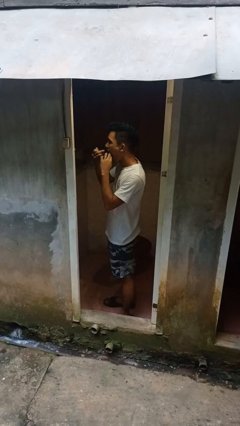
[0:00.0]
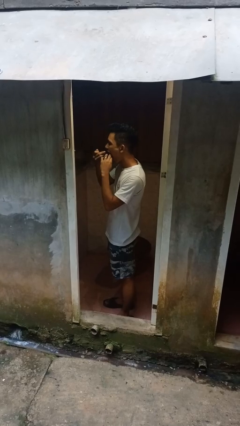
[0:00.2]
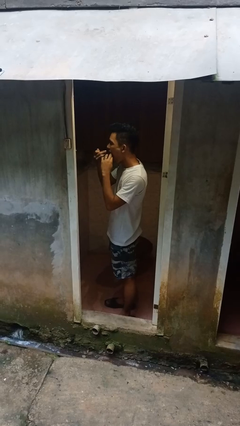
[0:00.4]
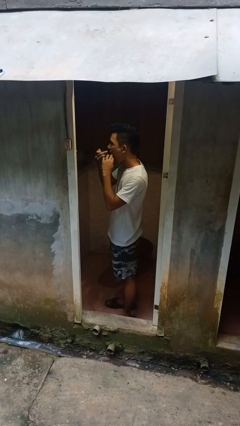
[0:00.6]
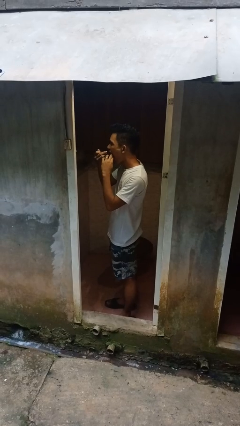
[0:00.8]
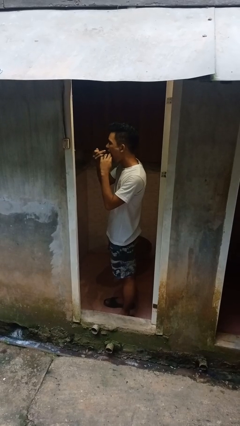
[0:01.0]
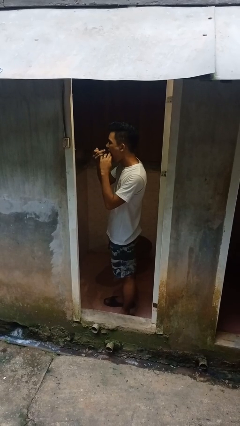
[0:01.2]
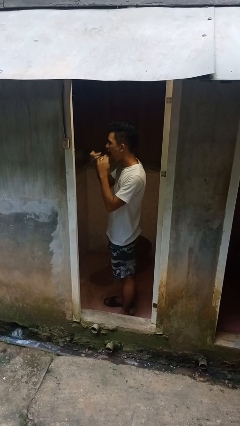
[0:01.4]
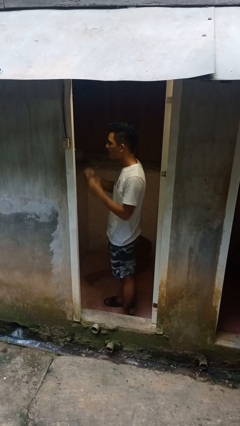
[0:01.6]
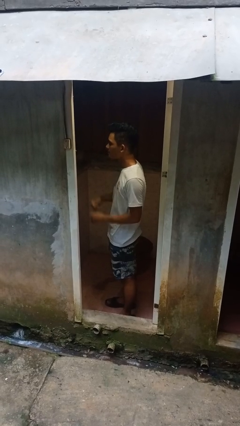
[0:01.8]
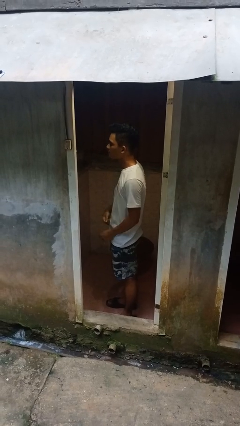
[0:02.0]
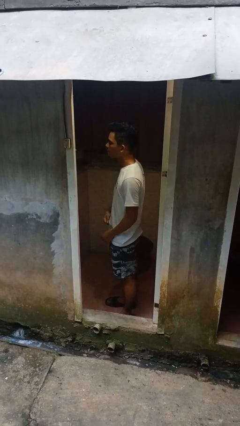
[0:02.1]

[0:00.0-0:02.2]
person flosses

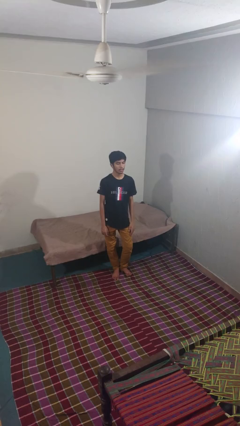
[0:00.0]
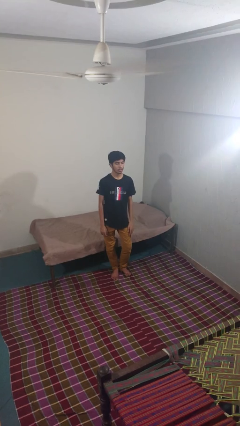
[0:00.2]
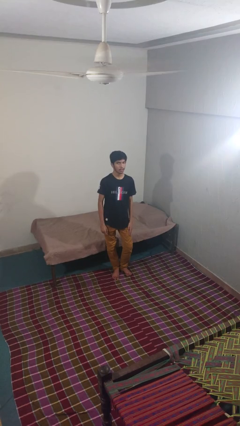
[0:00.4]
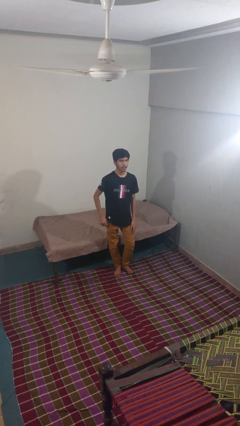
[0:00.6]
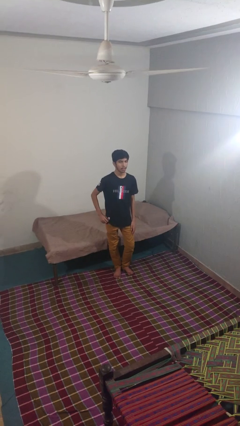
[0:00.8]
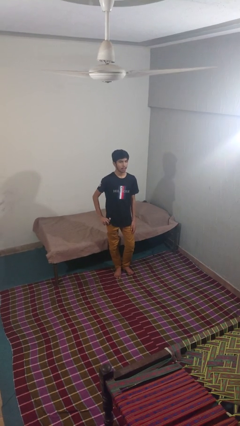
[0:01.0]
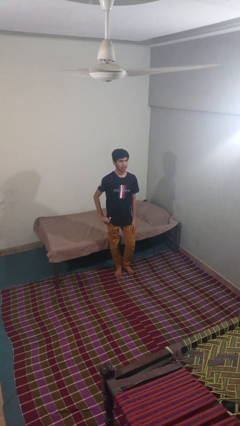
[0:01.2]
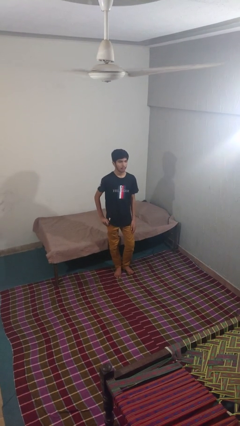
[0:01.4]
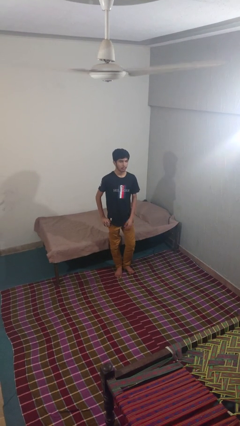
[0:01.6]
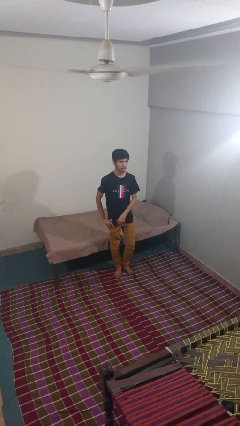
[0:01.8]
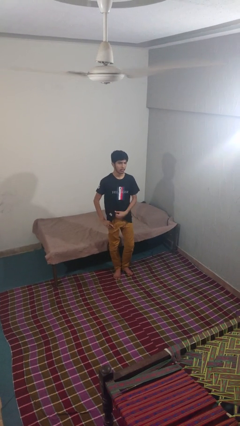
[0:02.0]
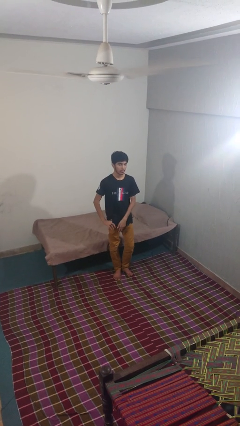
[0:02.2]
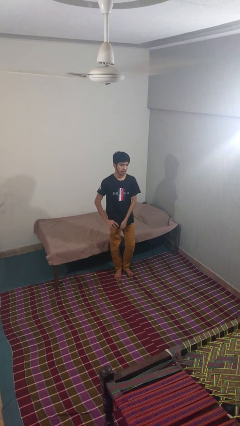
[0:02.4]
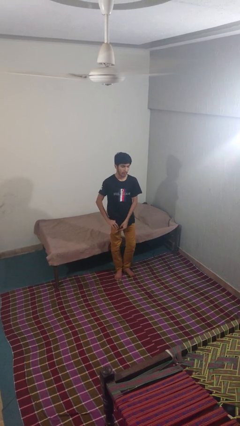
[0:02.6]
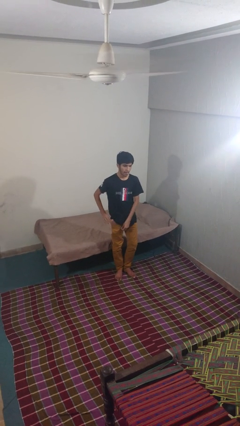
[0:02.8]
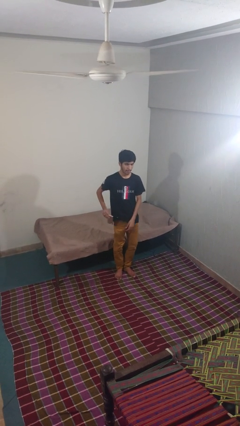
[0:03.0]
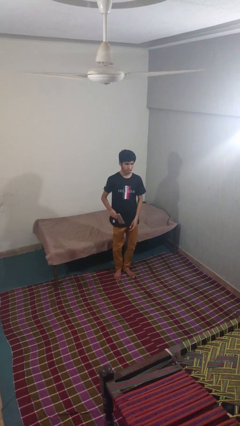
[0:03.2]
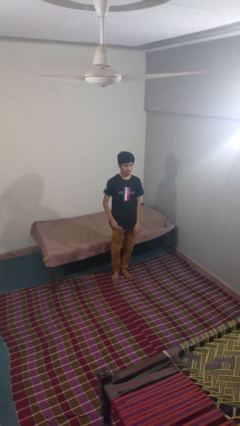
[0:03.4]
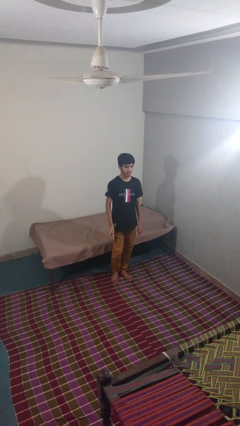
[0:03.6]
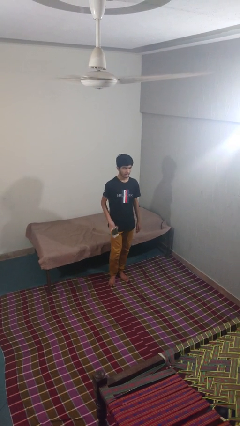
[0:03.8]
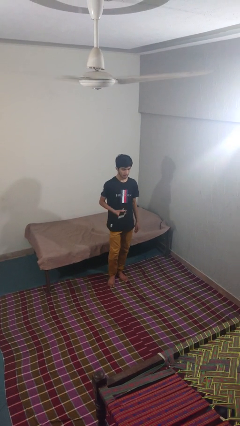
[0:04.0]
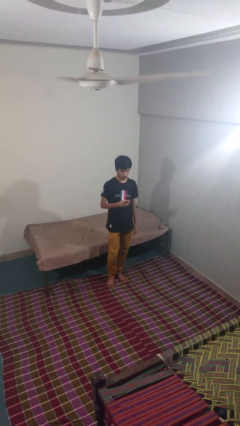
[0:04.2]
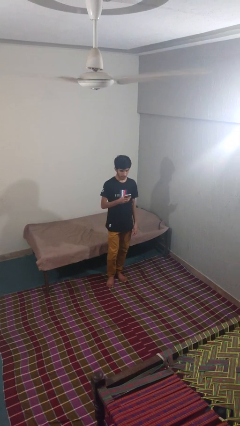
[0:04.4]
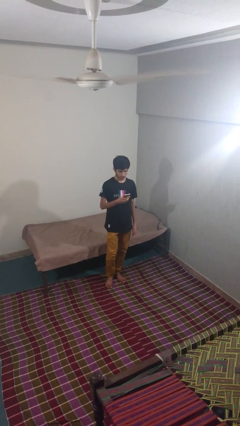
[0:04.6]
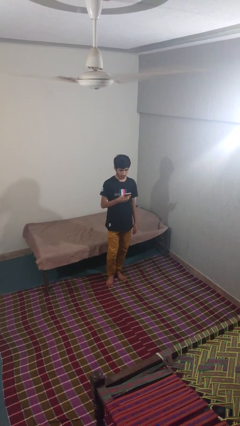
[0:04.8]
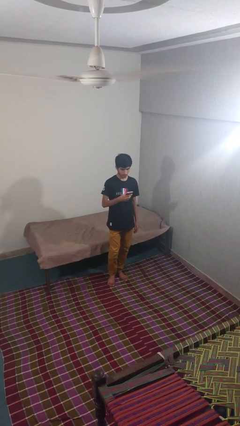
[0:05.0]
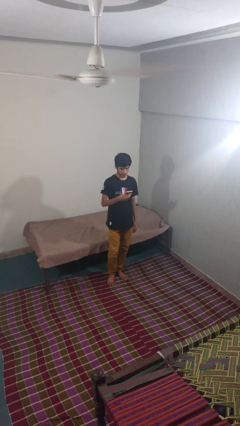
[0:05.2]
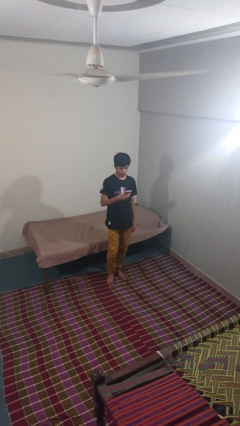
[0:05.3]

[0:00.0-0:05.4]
person takes phone from pocket

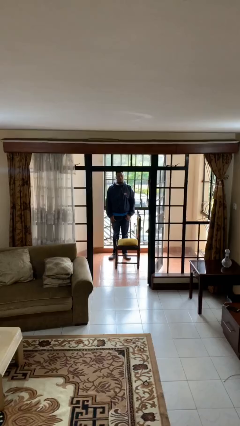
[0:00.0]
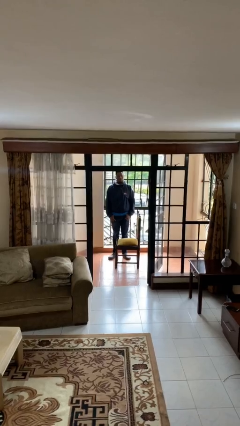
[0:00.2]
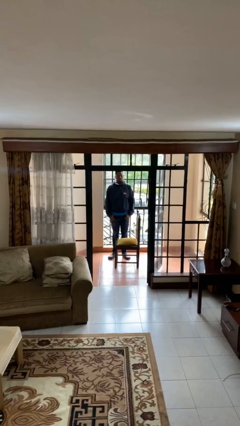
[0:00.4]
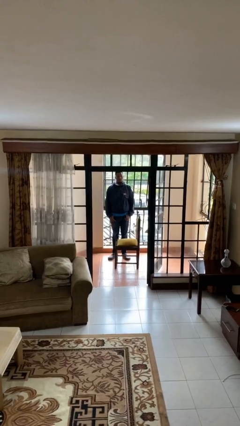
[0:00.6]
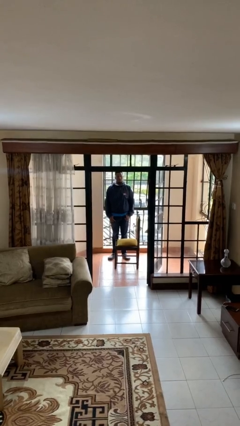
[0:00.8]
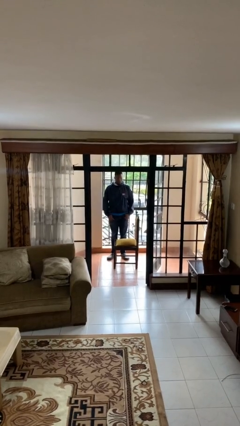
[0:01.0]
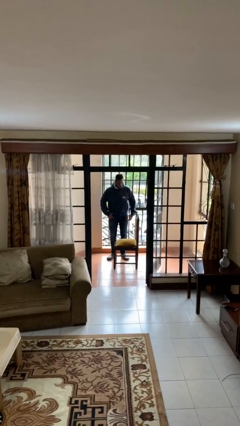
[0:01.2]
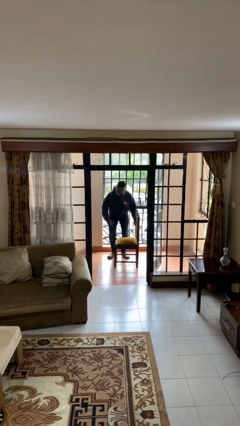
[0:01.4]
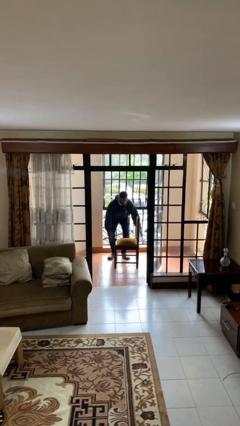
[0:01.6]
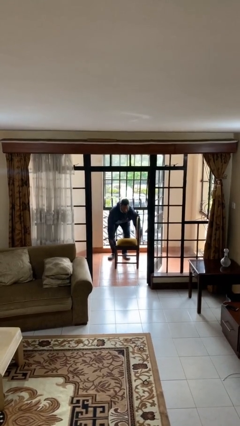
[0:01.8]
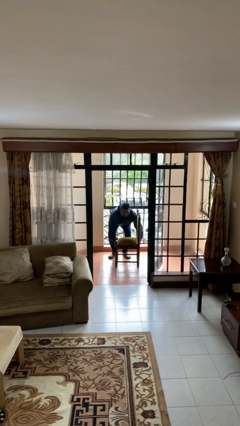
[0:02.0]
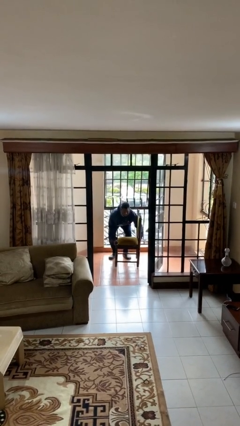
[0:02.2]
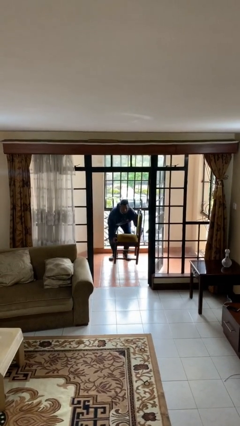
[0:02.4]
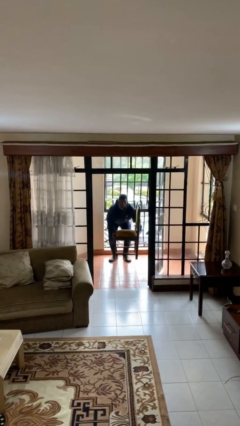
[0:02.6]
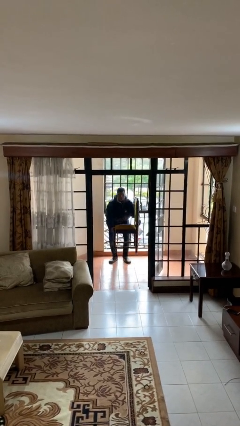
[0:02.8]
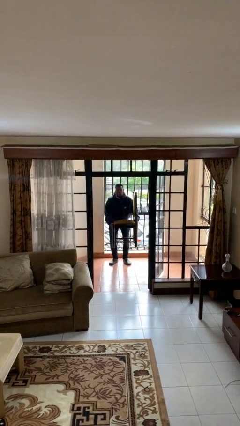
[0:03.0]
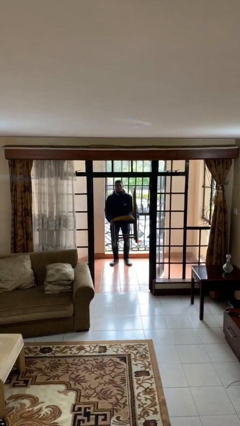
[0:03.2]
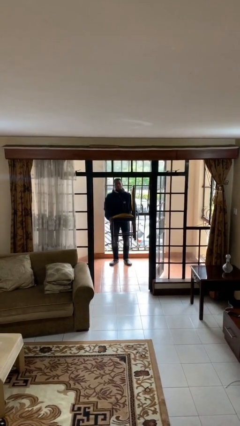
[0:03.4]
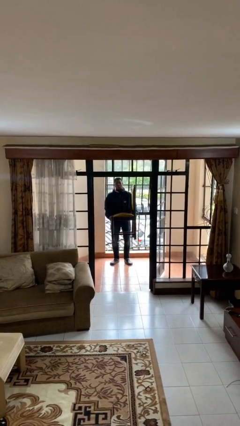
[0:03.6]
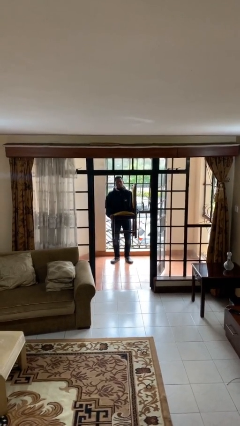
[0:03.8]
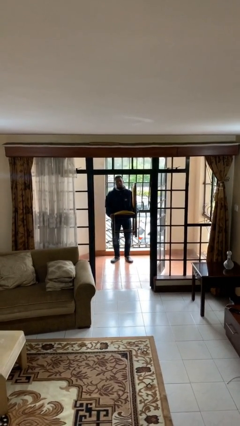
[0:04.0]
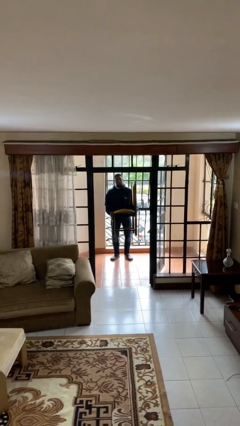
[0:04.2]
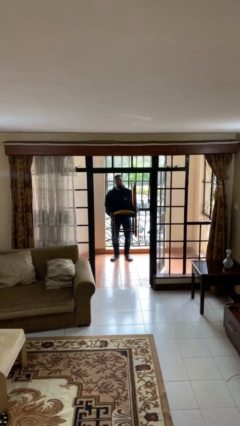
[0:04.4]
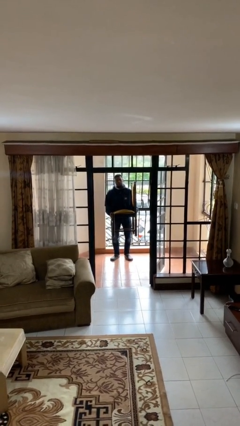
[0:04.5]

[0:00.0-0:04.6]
person picks up object from floor

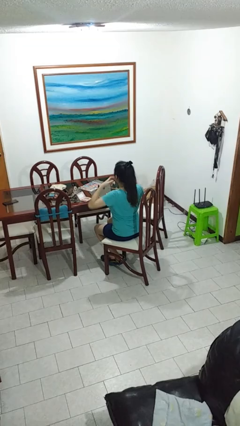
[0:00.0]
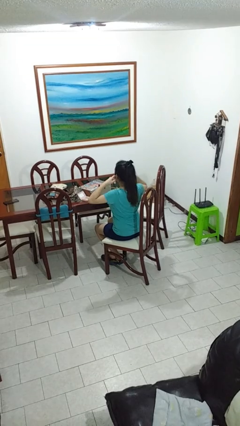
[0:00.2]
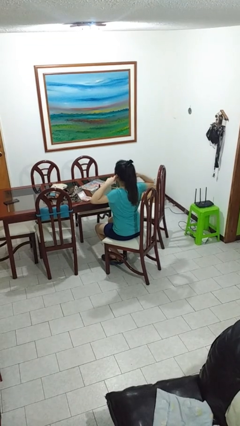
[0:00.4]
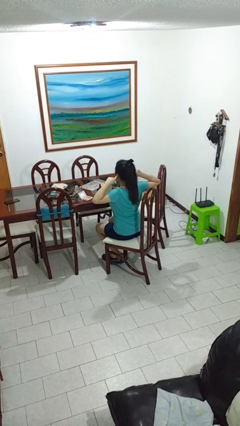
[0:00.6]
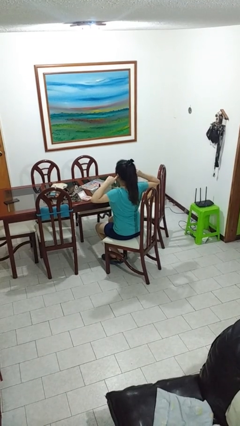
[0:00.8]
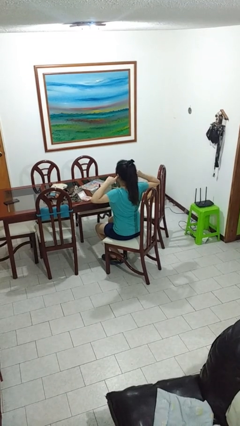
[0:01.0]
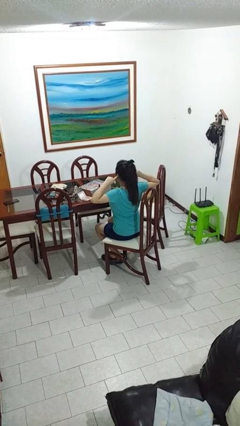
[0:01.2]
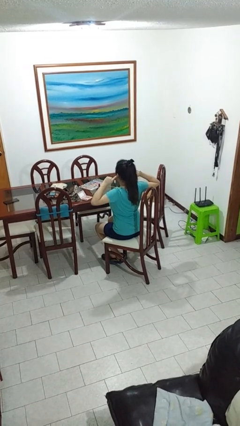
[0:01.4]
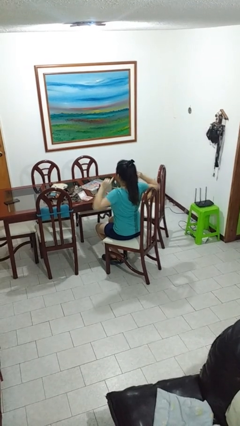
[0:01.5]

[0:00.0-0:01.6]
person puts fingers in ear

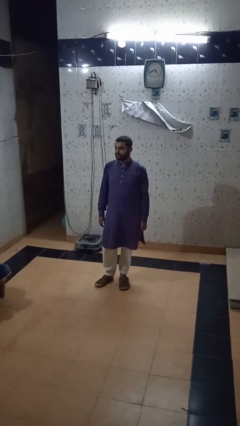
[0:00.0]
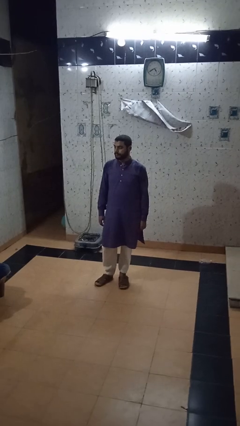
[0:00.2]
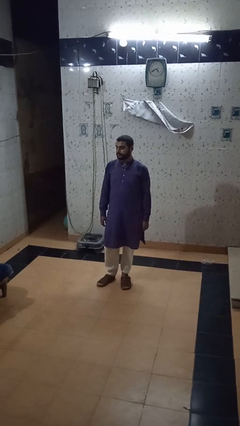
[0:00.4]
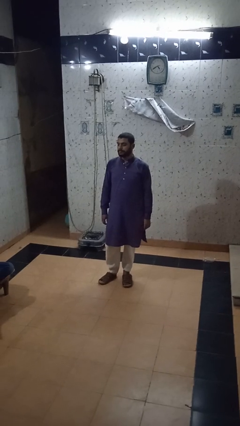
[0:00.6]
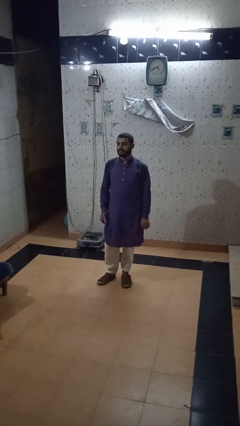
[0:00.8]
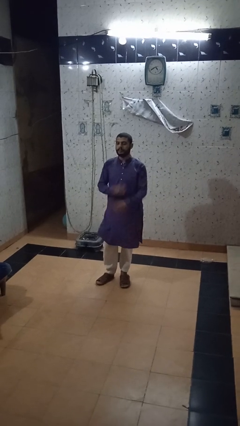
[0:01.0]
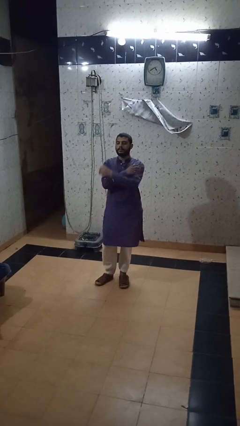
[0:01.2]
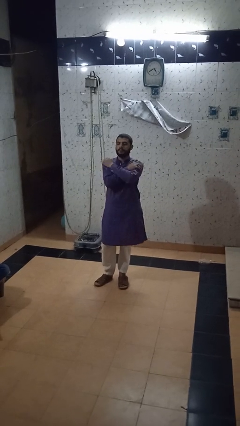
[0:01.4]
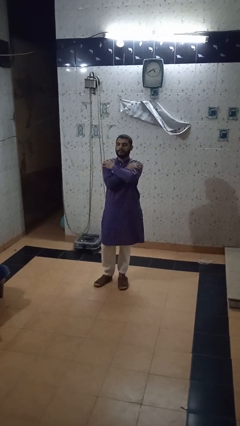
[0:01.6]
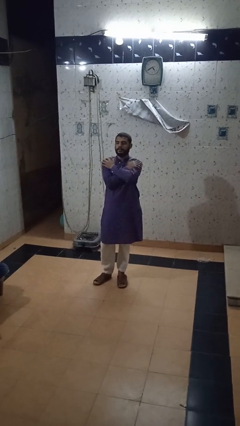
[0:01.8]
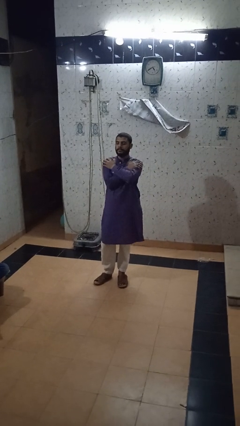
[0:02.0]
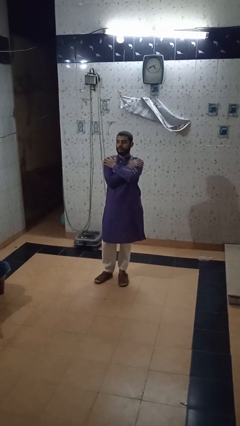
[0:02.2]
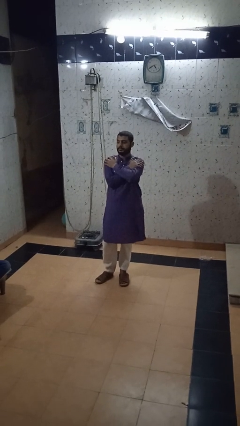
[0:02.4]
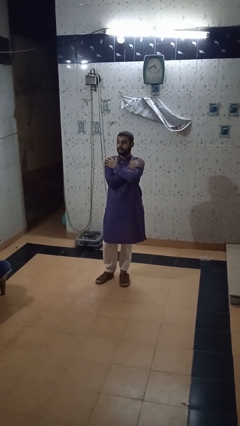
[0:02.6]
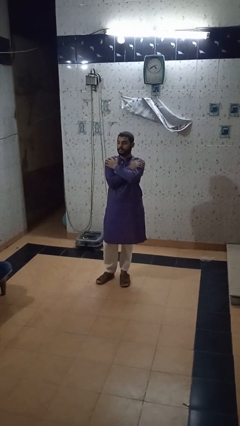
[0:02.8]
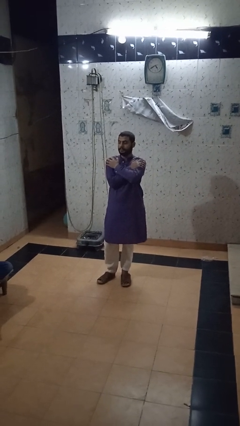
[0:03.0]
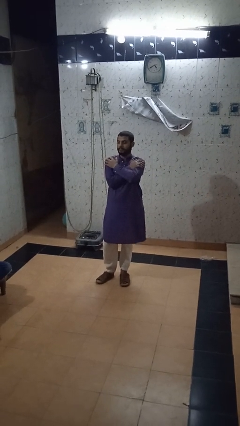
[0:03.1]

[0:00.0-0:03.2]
person crosses arms
